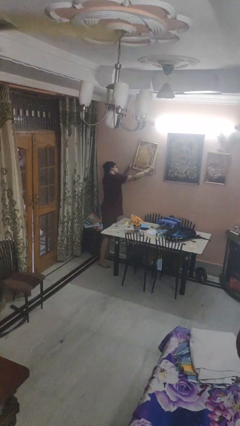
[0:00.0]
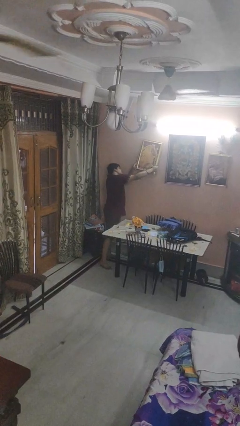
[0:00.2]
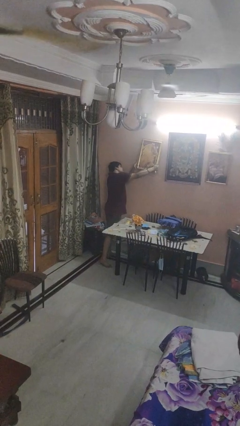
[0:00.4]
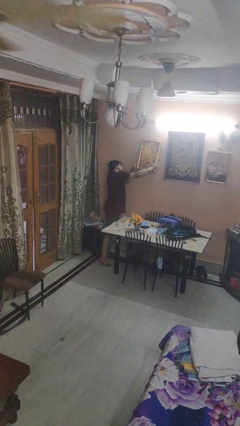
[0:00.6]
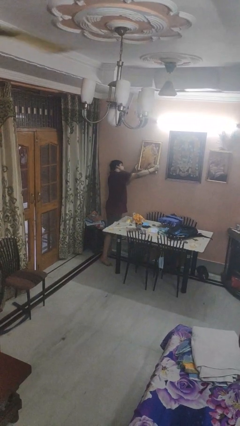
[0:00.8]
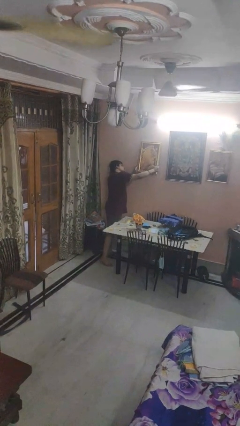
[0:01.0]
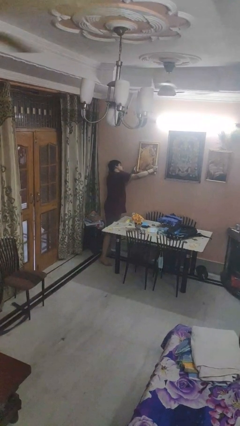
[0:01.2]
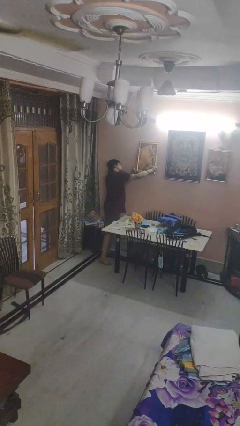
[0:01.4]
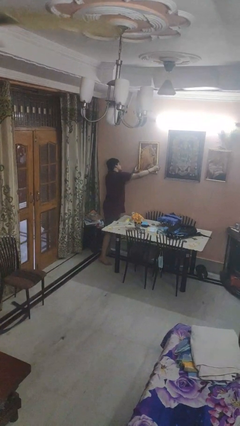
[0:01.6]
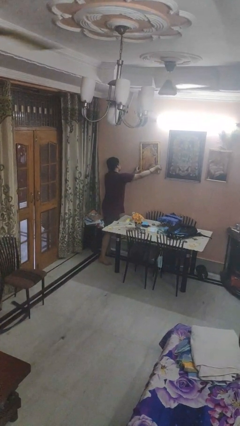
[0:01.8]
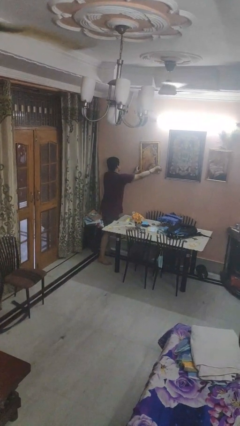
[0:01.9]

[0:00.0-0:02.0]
person puts up picture frame

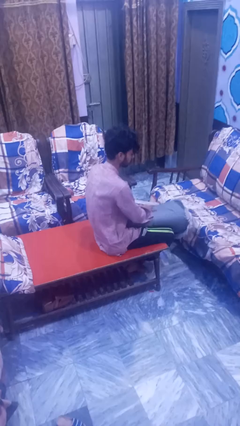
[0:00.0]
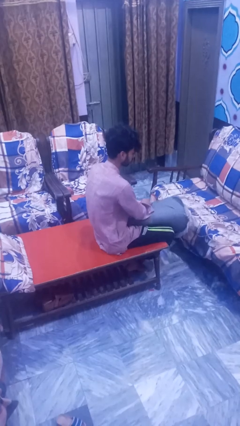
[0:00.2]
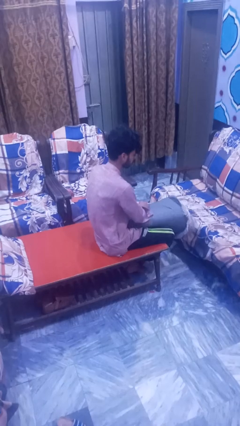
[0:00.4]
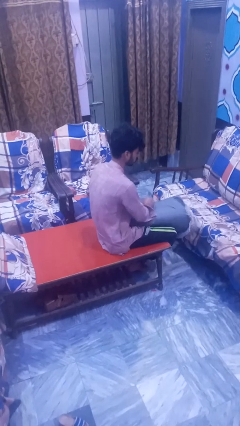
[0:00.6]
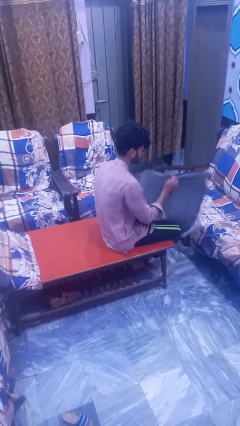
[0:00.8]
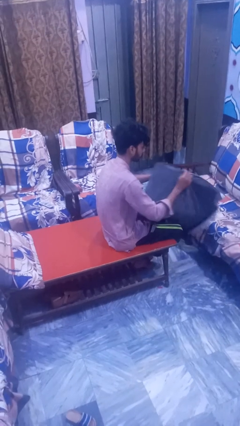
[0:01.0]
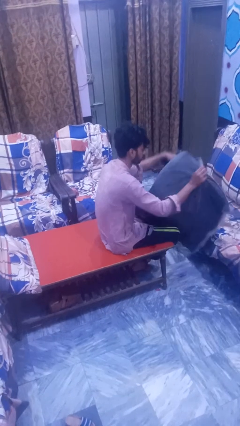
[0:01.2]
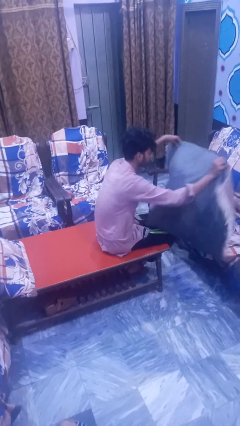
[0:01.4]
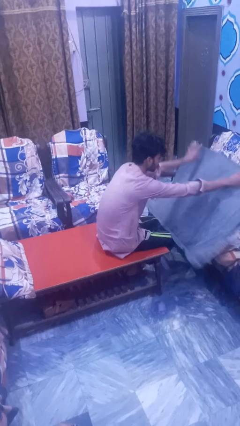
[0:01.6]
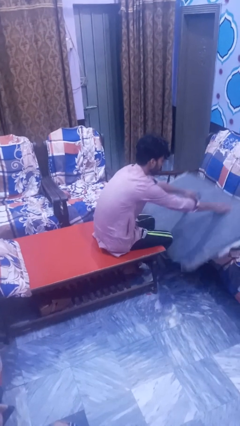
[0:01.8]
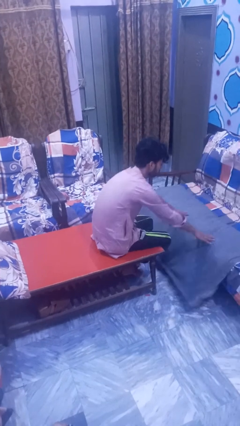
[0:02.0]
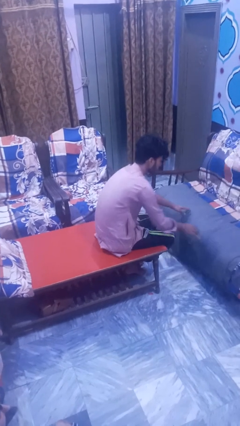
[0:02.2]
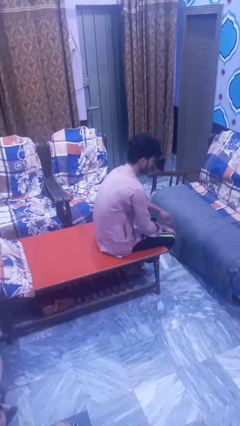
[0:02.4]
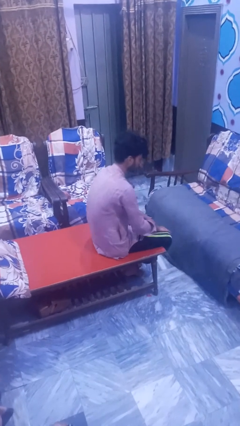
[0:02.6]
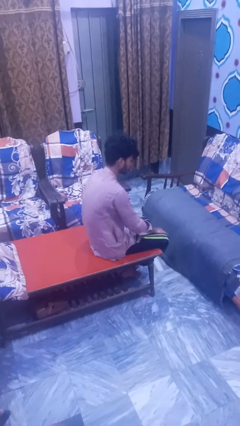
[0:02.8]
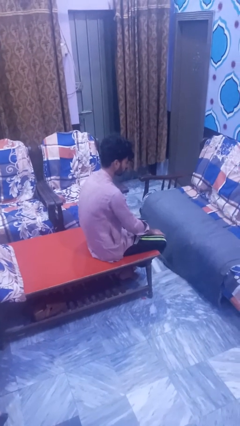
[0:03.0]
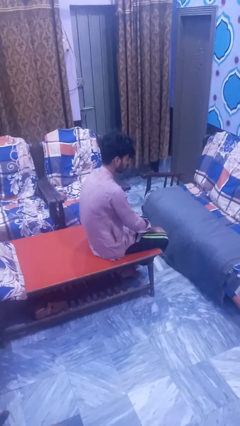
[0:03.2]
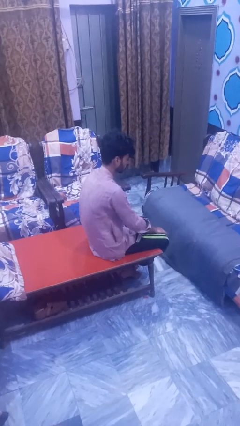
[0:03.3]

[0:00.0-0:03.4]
person unfolds blanket

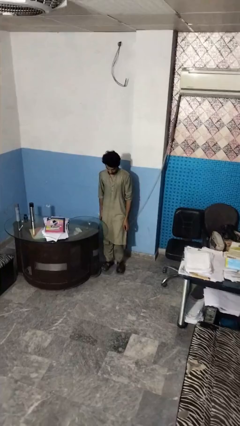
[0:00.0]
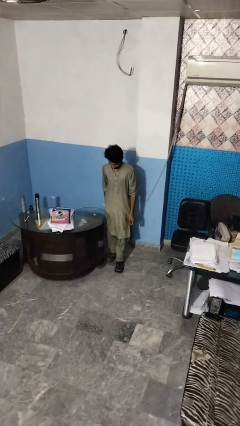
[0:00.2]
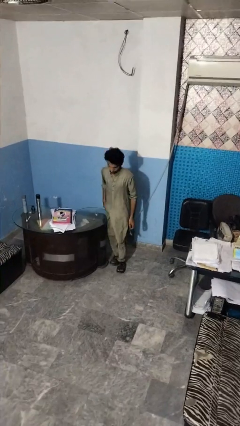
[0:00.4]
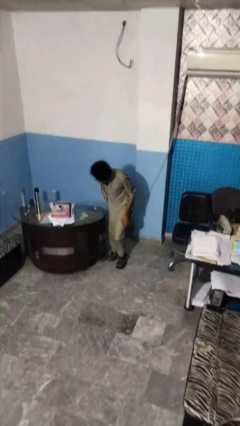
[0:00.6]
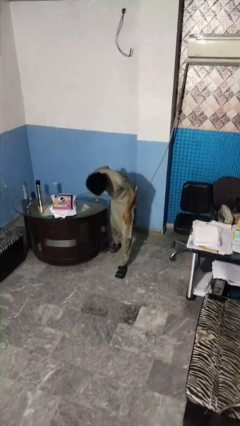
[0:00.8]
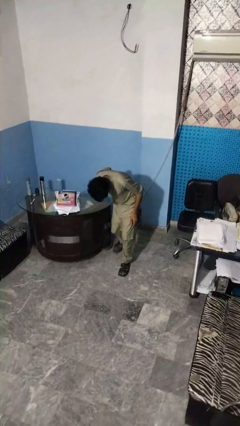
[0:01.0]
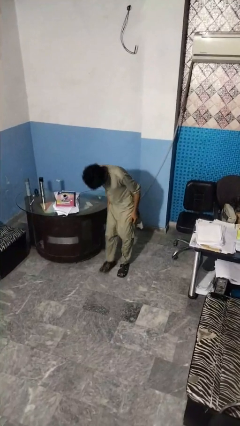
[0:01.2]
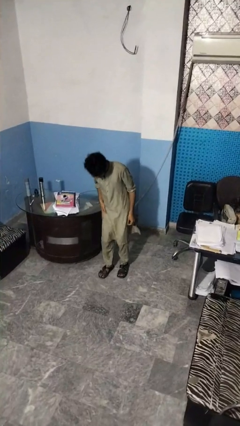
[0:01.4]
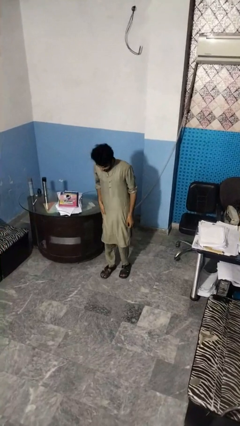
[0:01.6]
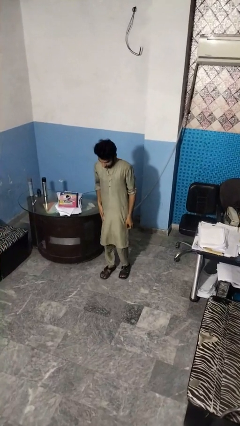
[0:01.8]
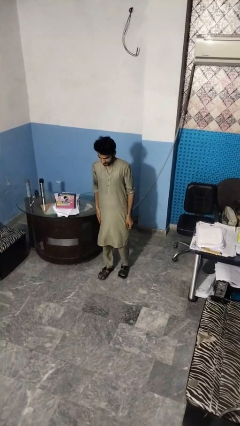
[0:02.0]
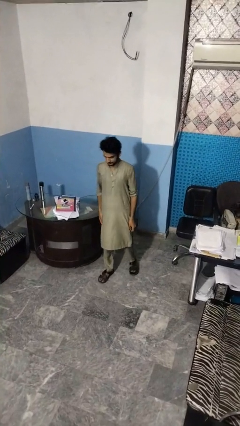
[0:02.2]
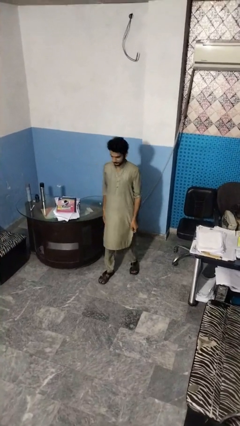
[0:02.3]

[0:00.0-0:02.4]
person bumps into table

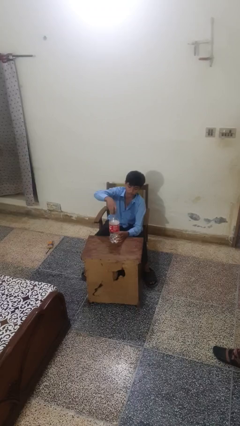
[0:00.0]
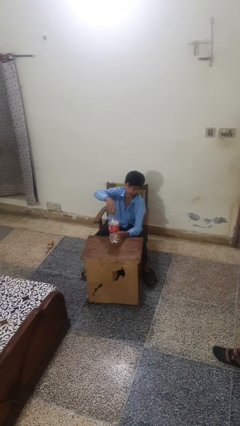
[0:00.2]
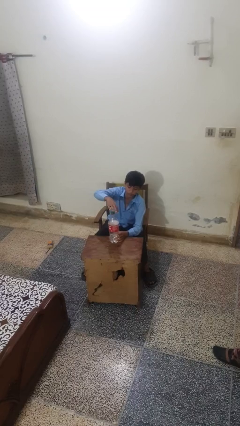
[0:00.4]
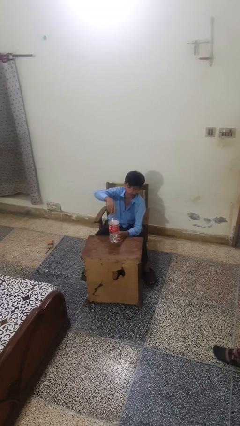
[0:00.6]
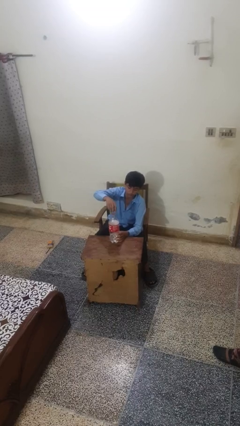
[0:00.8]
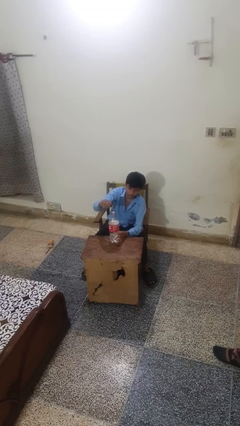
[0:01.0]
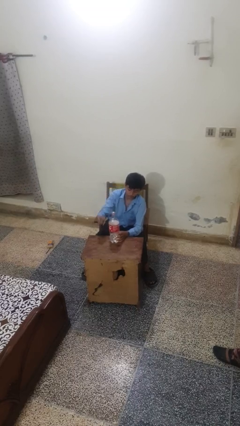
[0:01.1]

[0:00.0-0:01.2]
person unscrews lid from bottle

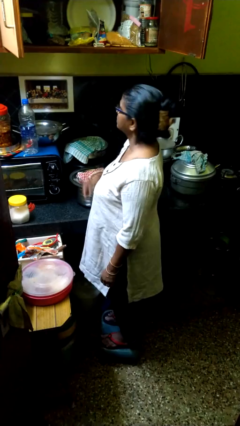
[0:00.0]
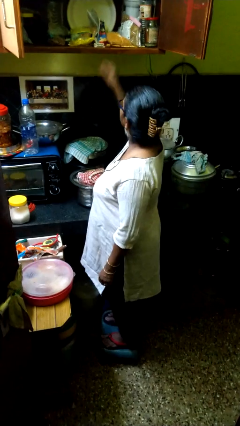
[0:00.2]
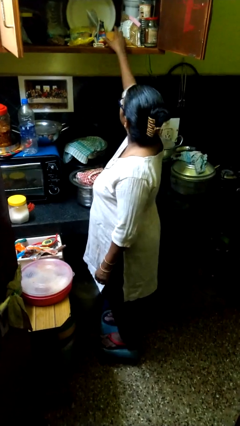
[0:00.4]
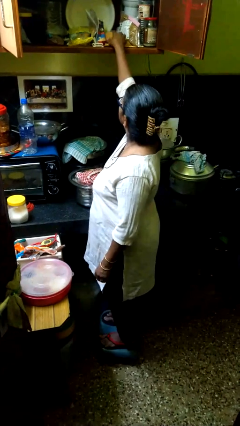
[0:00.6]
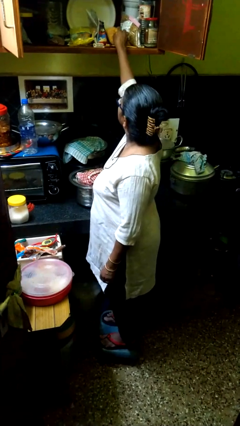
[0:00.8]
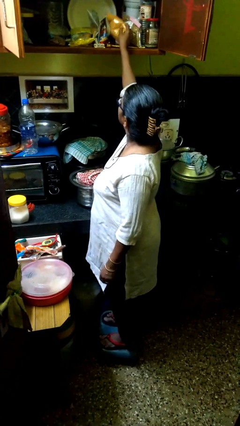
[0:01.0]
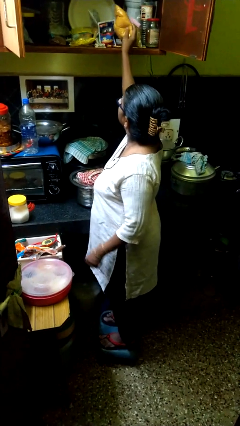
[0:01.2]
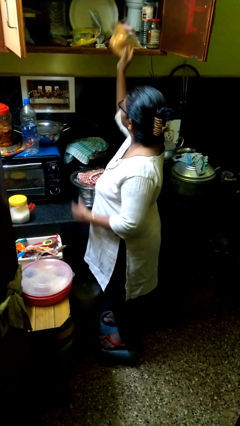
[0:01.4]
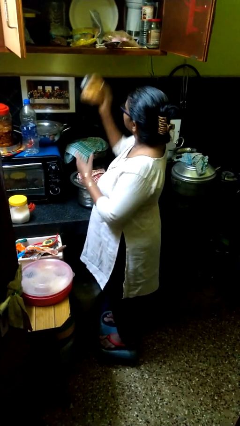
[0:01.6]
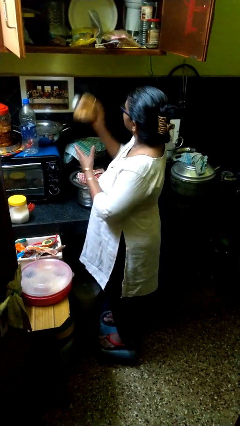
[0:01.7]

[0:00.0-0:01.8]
person takes object from cabinet

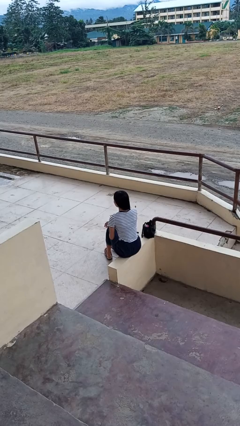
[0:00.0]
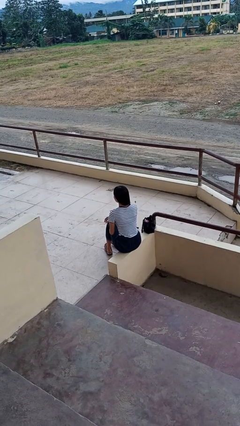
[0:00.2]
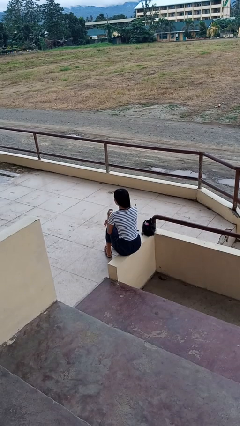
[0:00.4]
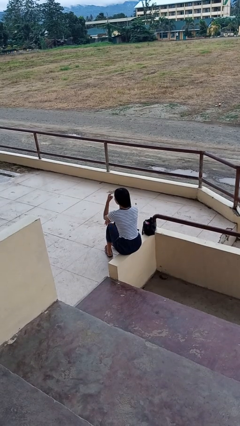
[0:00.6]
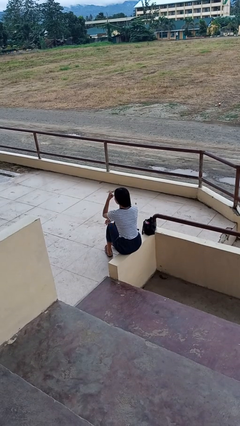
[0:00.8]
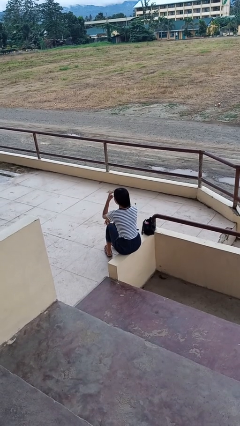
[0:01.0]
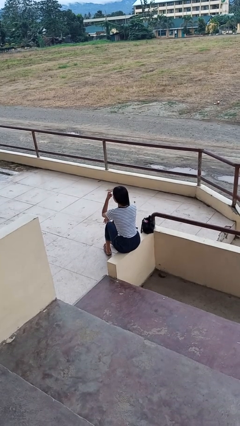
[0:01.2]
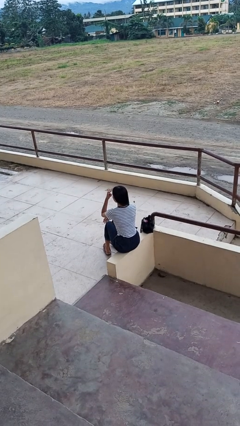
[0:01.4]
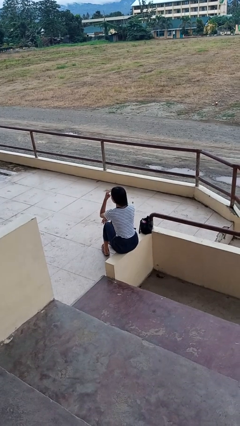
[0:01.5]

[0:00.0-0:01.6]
person gestures watch closely

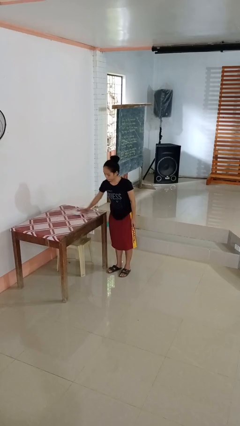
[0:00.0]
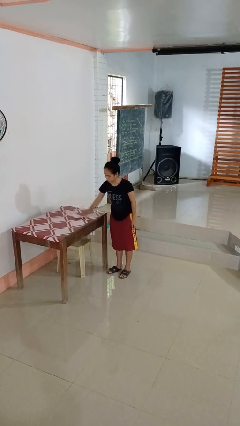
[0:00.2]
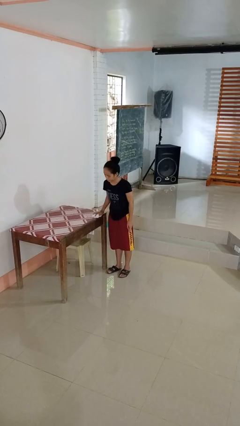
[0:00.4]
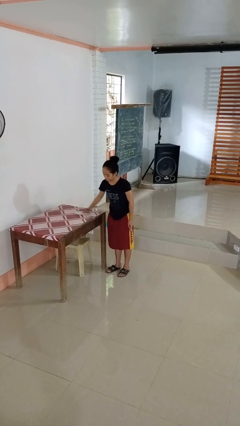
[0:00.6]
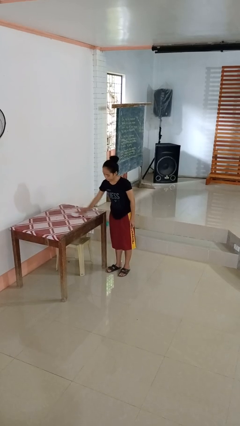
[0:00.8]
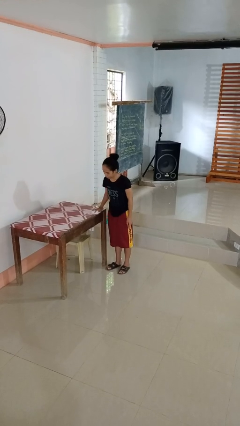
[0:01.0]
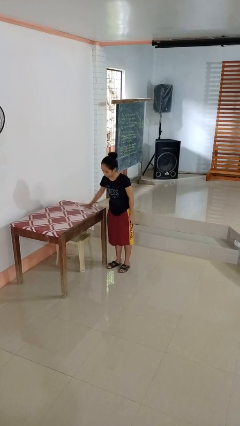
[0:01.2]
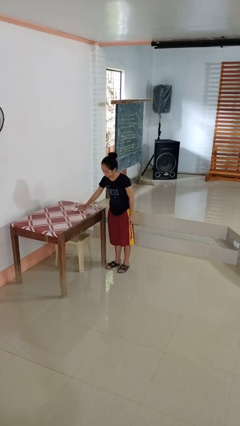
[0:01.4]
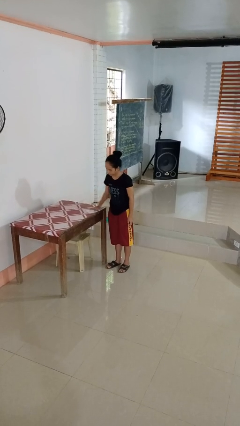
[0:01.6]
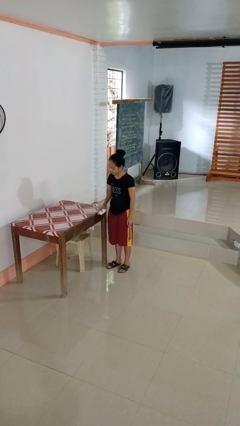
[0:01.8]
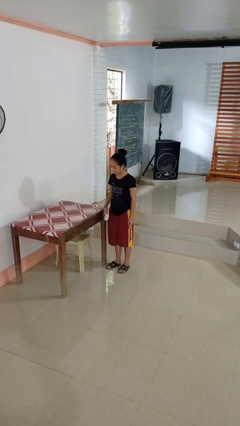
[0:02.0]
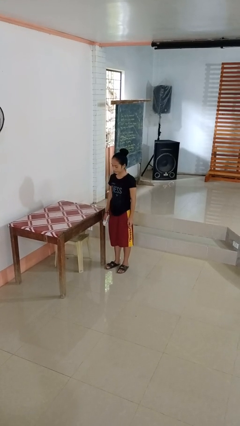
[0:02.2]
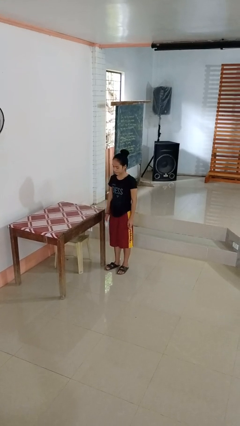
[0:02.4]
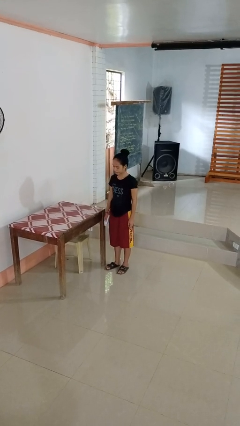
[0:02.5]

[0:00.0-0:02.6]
person cleans table with rag

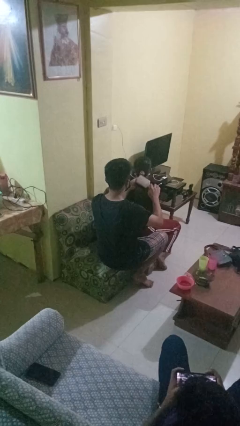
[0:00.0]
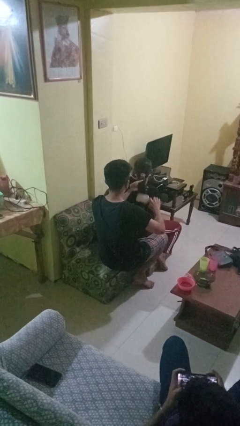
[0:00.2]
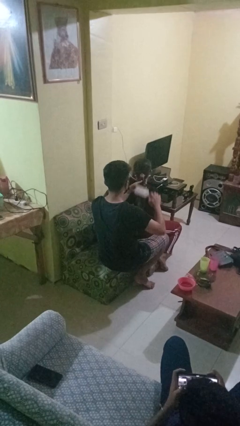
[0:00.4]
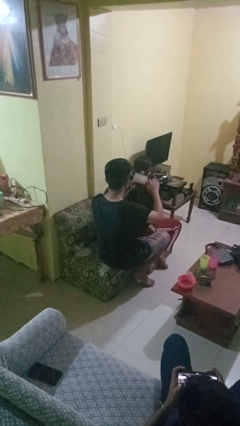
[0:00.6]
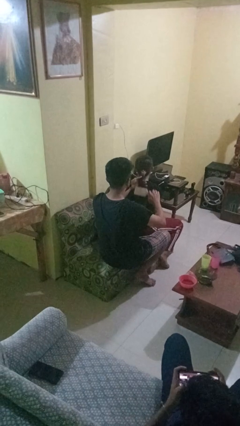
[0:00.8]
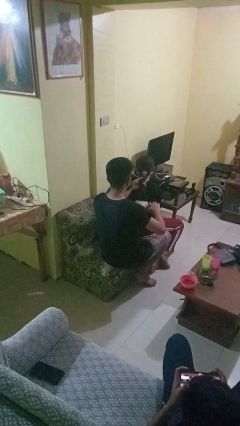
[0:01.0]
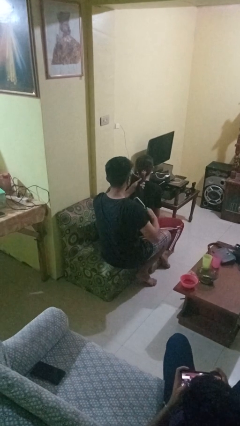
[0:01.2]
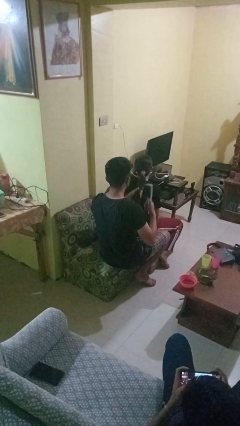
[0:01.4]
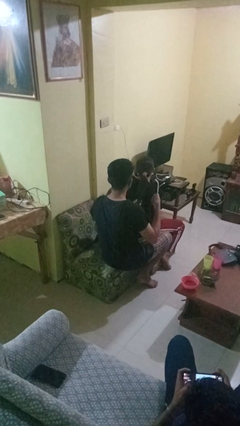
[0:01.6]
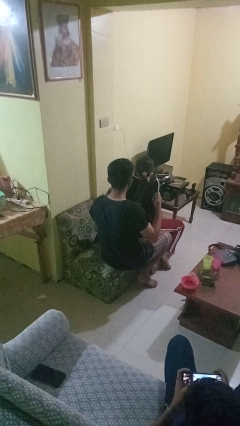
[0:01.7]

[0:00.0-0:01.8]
person brushes hair of person
